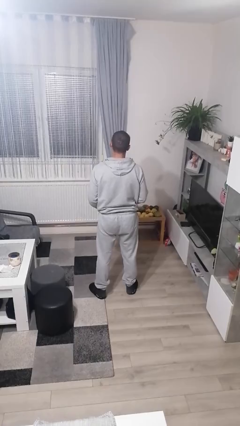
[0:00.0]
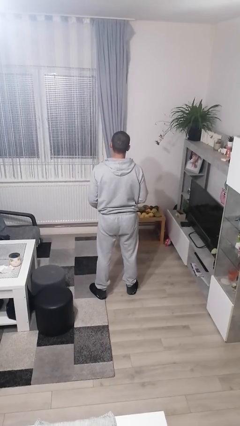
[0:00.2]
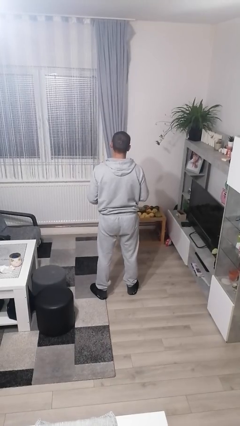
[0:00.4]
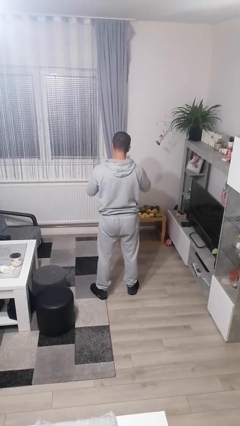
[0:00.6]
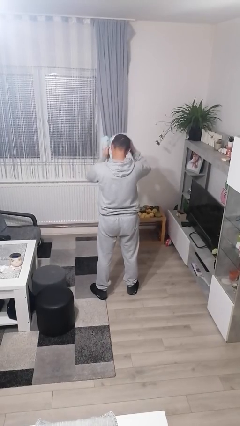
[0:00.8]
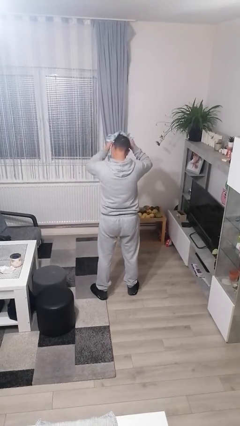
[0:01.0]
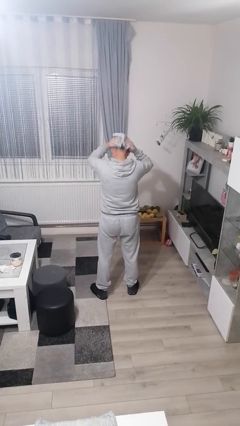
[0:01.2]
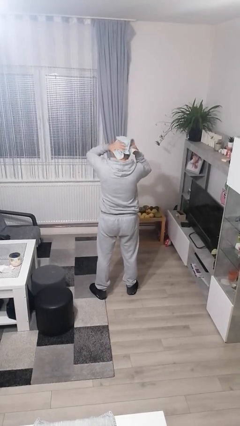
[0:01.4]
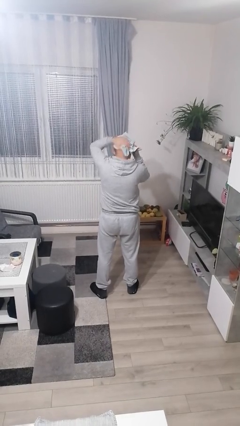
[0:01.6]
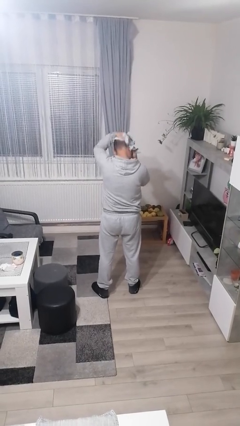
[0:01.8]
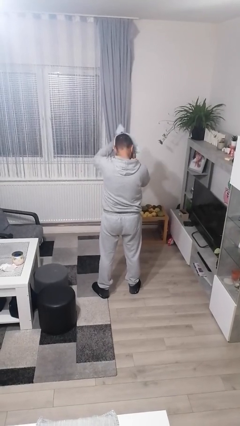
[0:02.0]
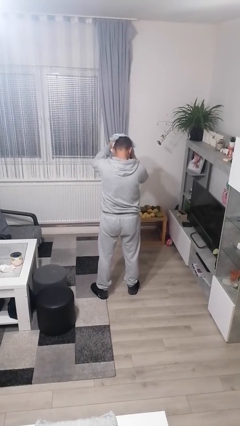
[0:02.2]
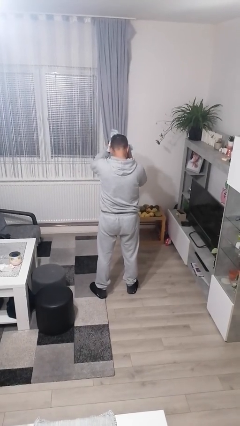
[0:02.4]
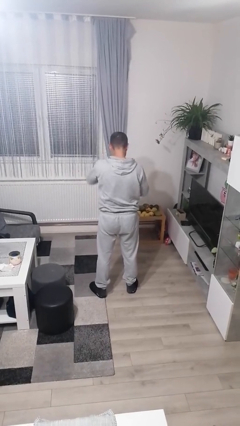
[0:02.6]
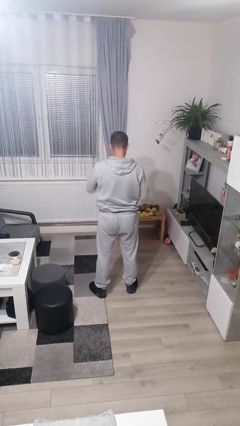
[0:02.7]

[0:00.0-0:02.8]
person dries hair with towel

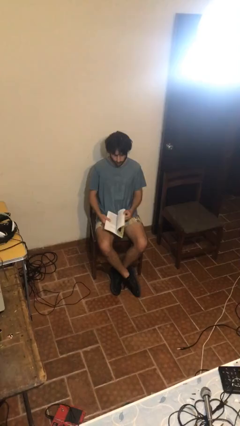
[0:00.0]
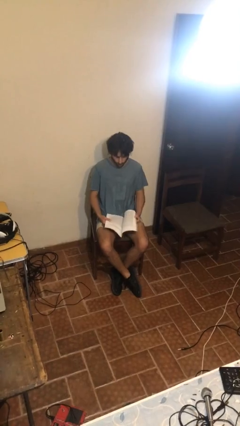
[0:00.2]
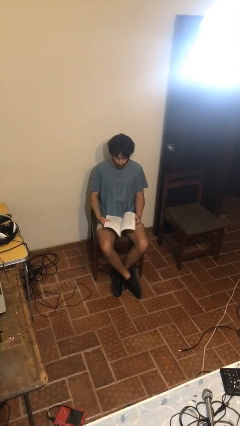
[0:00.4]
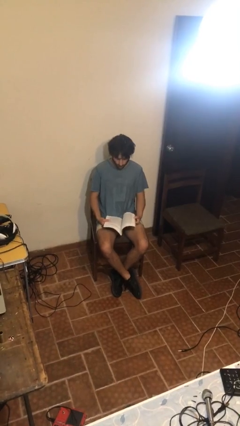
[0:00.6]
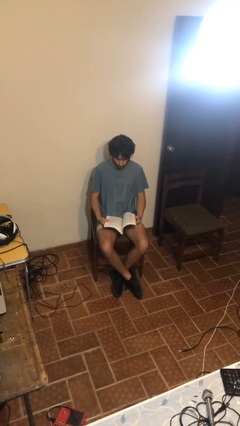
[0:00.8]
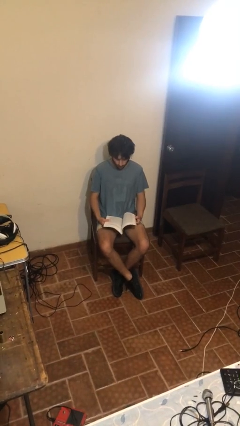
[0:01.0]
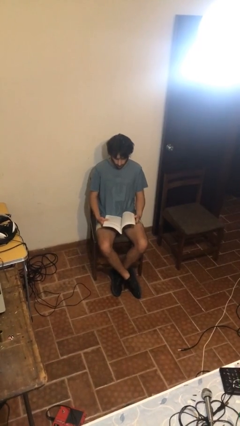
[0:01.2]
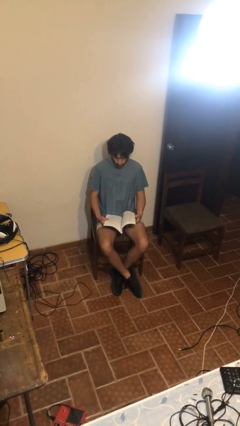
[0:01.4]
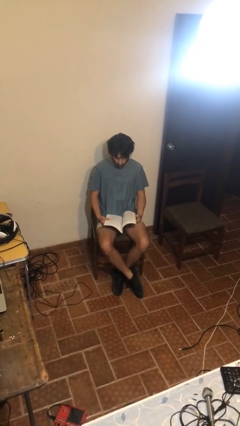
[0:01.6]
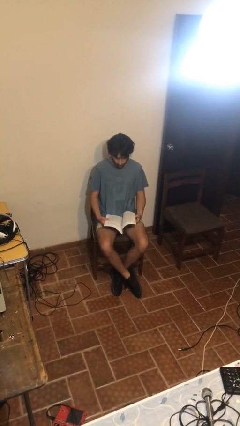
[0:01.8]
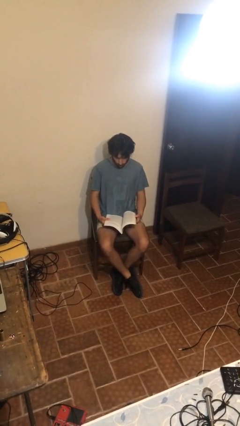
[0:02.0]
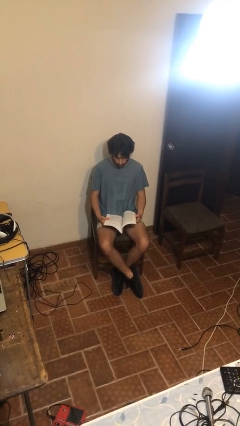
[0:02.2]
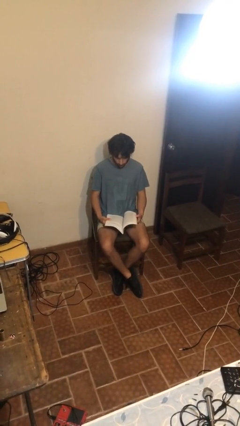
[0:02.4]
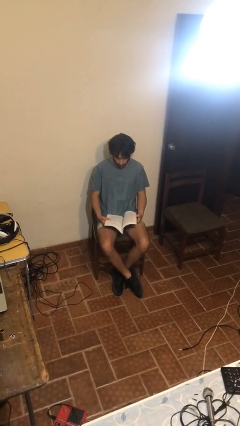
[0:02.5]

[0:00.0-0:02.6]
person reads document

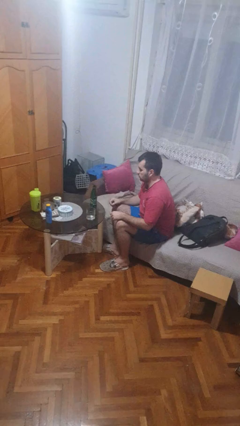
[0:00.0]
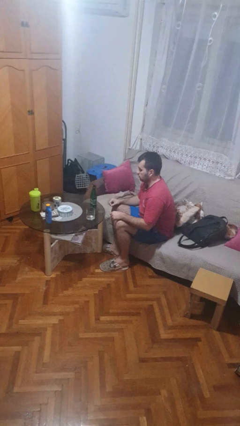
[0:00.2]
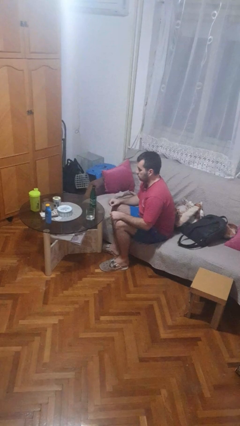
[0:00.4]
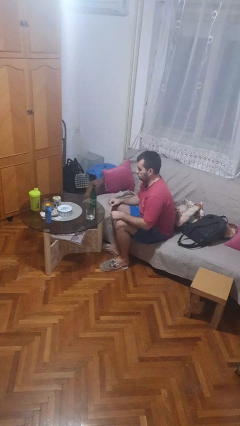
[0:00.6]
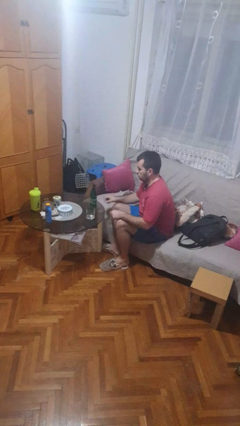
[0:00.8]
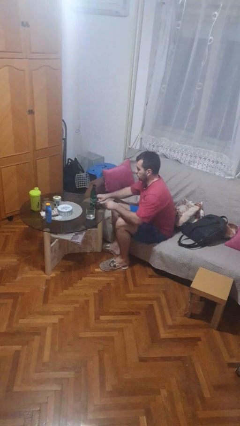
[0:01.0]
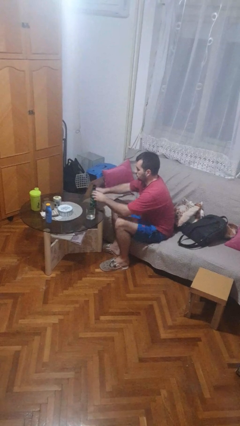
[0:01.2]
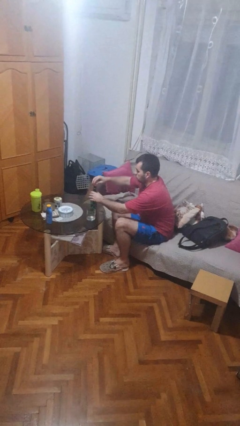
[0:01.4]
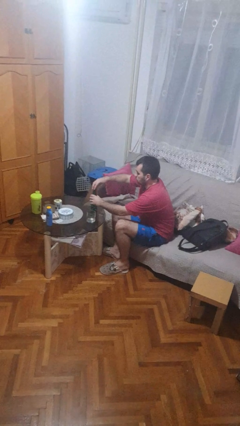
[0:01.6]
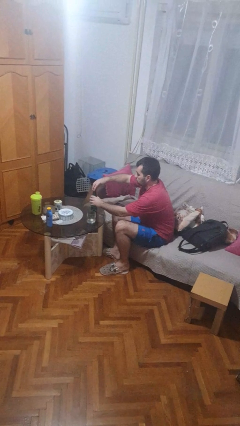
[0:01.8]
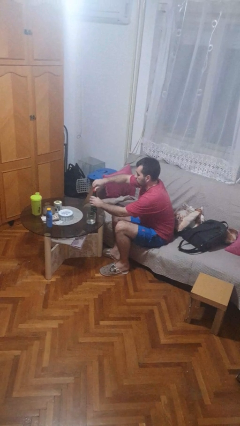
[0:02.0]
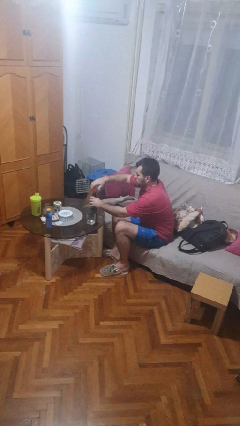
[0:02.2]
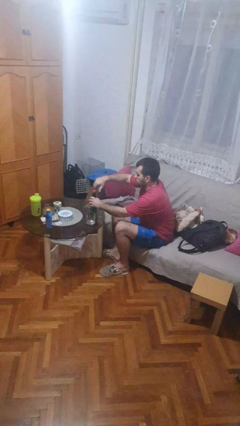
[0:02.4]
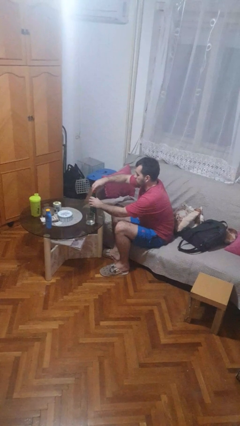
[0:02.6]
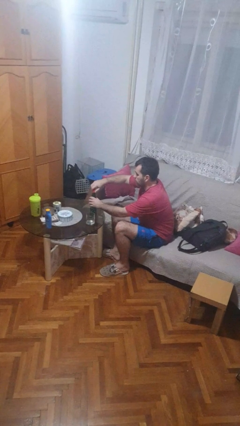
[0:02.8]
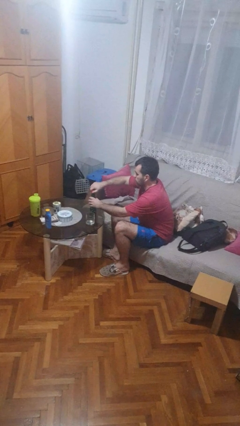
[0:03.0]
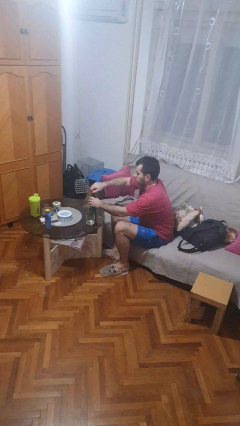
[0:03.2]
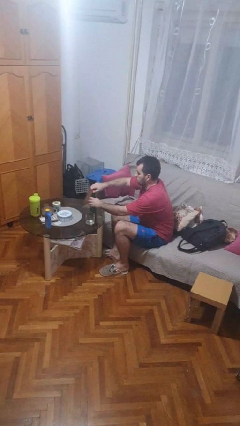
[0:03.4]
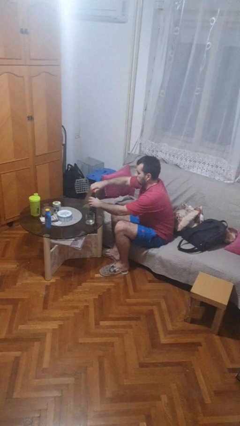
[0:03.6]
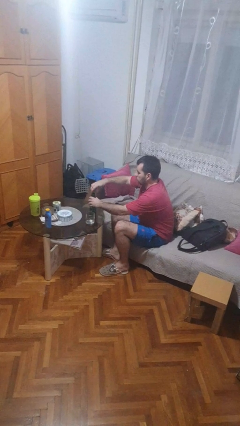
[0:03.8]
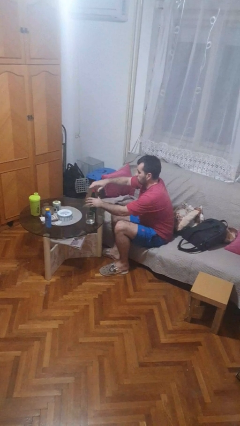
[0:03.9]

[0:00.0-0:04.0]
person screws lid to bottle

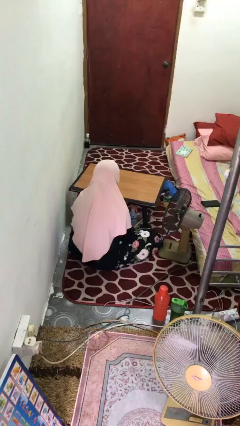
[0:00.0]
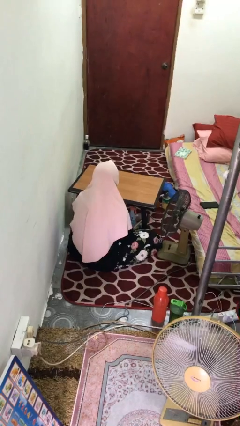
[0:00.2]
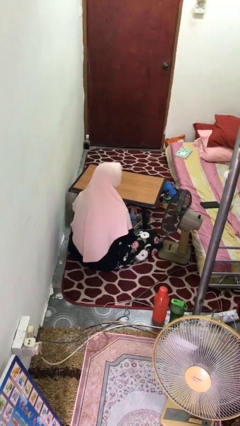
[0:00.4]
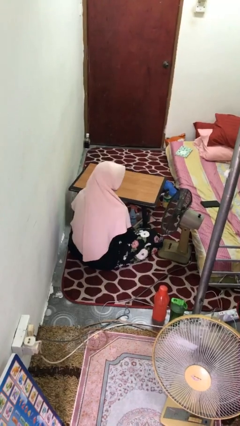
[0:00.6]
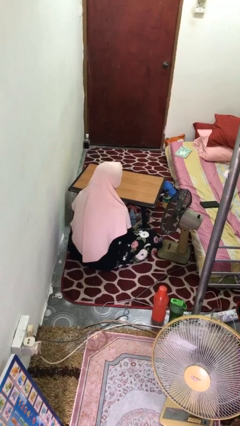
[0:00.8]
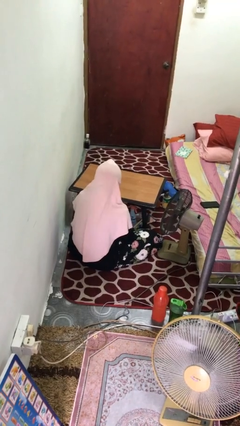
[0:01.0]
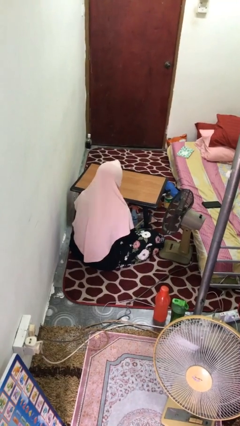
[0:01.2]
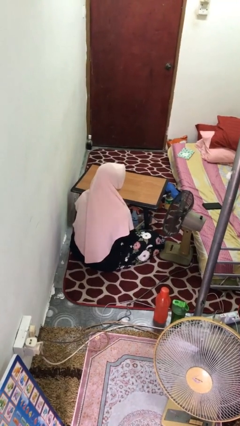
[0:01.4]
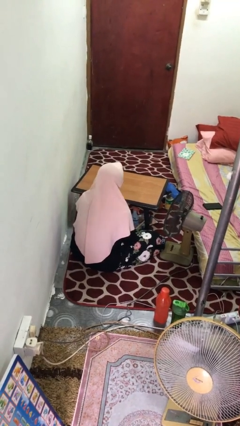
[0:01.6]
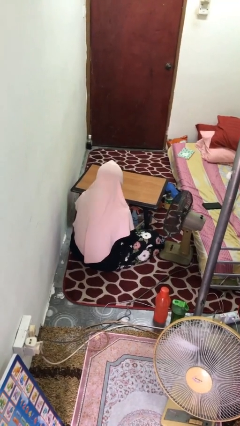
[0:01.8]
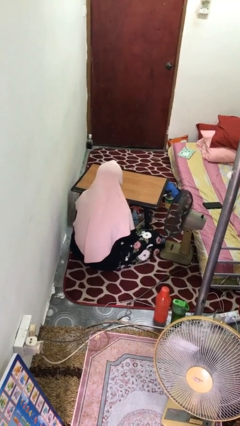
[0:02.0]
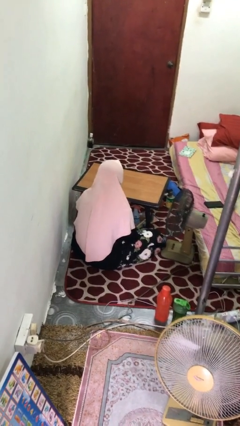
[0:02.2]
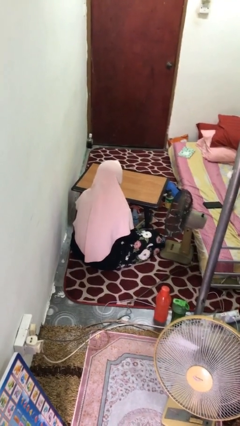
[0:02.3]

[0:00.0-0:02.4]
person shakes head

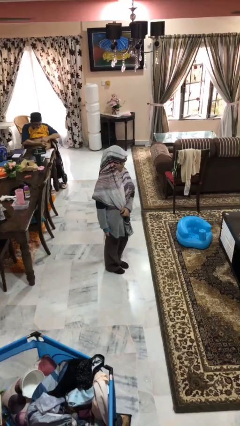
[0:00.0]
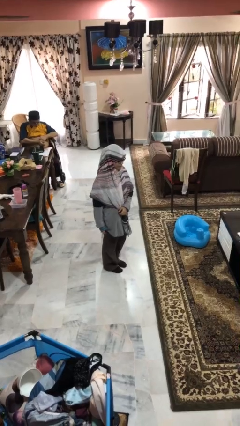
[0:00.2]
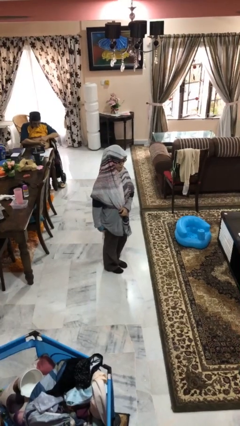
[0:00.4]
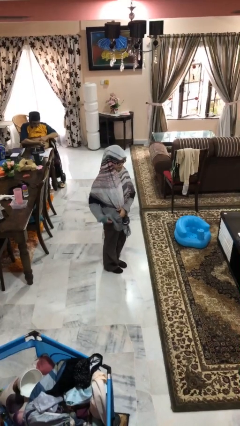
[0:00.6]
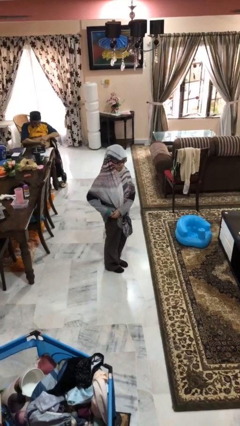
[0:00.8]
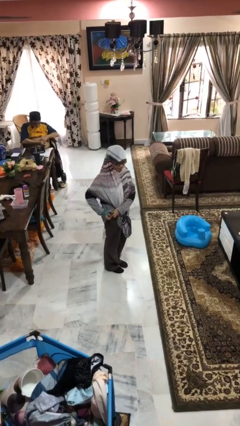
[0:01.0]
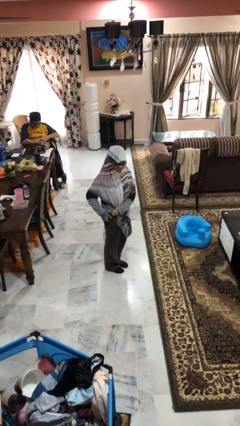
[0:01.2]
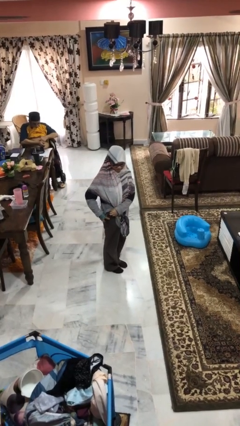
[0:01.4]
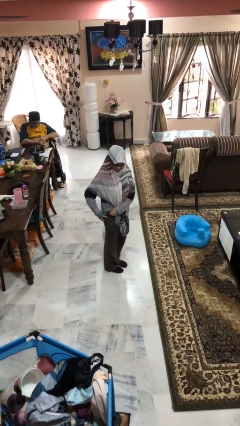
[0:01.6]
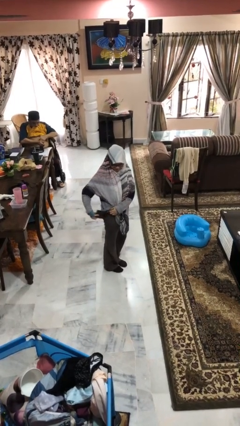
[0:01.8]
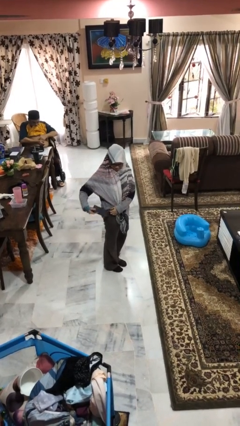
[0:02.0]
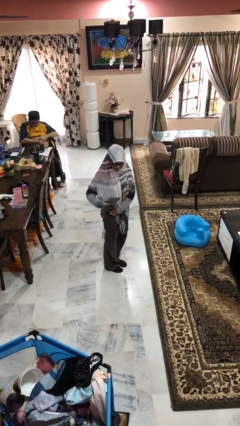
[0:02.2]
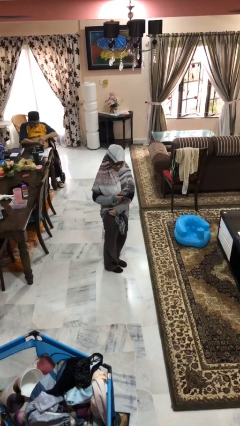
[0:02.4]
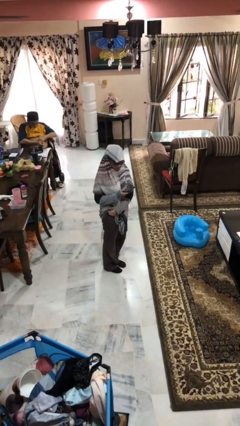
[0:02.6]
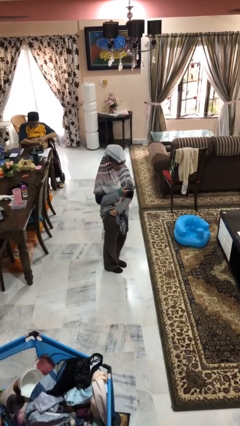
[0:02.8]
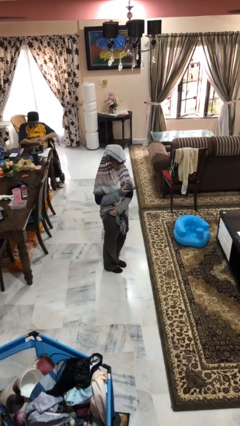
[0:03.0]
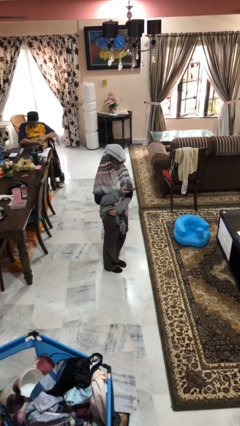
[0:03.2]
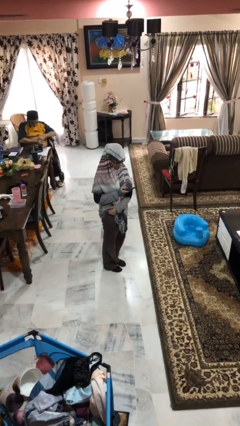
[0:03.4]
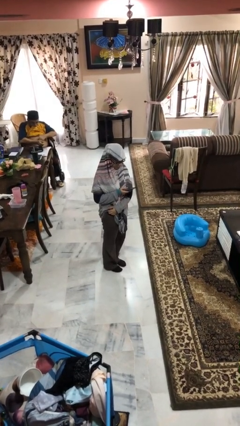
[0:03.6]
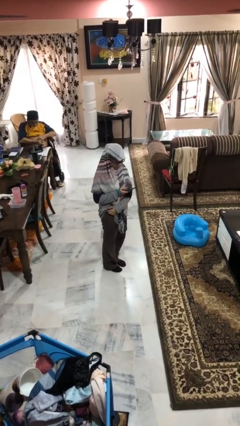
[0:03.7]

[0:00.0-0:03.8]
person takes phone from pocket

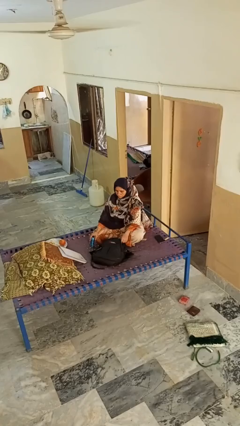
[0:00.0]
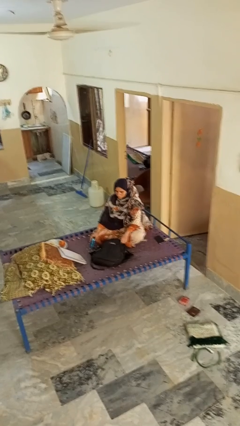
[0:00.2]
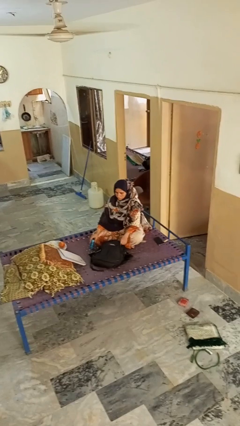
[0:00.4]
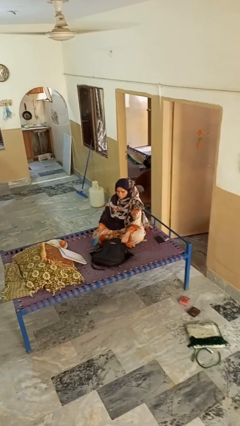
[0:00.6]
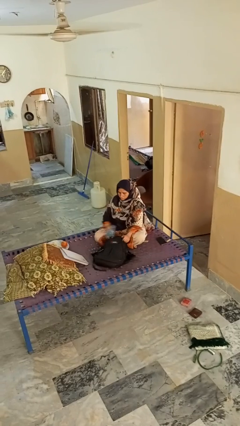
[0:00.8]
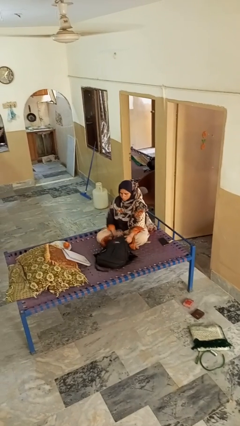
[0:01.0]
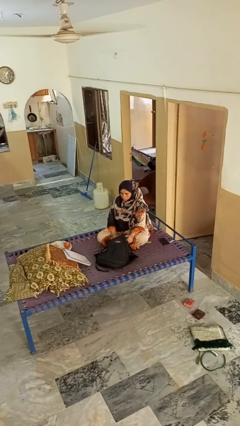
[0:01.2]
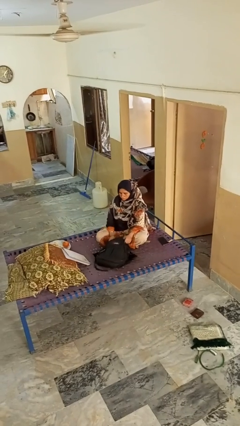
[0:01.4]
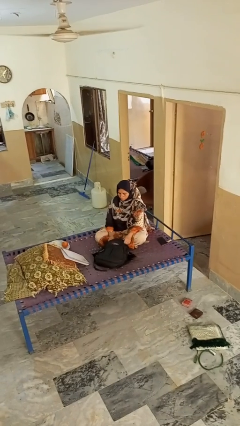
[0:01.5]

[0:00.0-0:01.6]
person puts object into bag

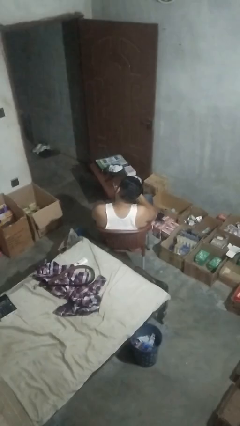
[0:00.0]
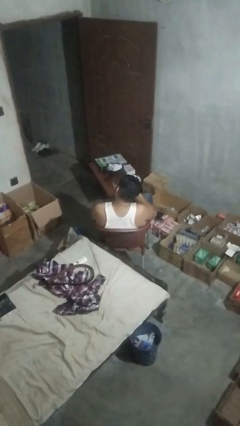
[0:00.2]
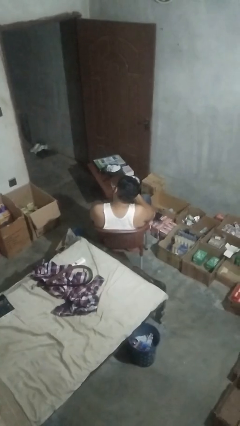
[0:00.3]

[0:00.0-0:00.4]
person picks up object from table
